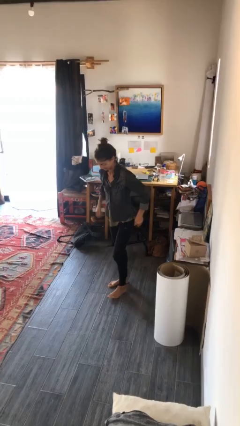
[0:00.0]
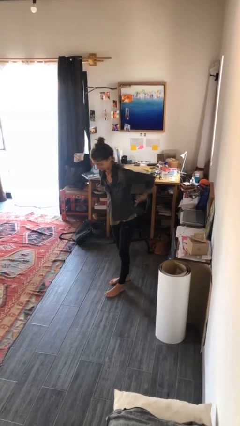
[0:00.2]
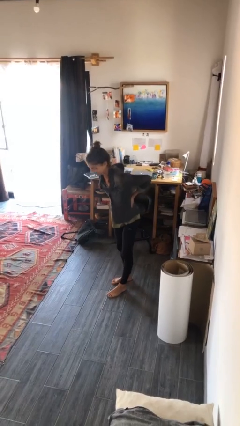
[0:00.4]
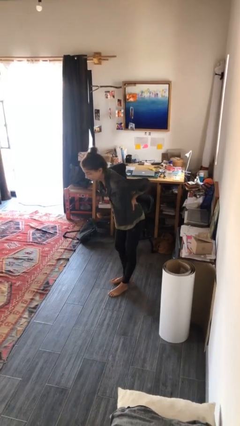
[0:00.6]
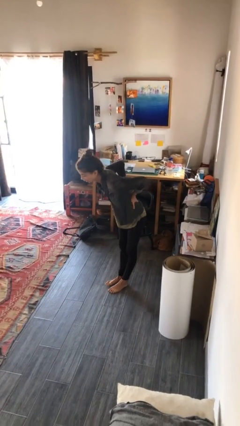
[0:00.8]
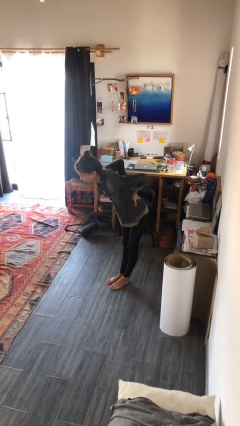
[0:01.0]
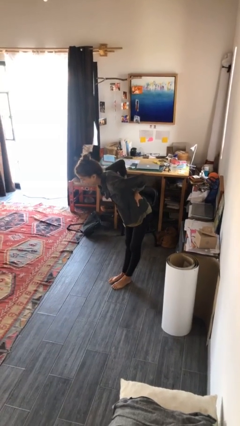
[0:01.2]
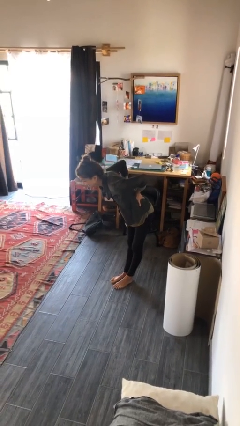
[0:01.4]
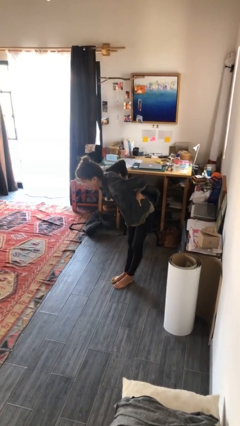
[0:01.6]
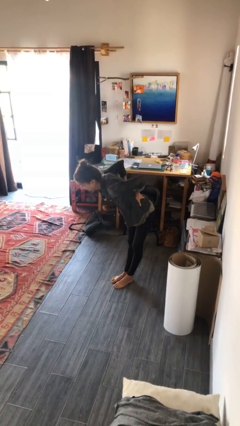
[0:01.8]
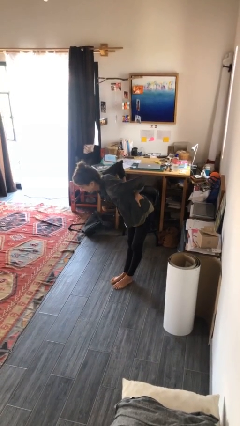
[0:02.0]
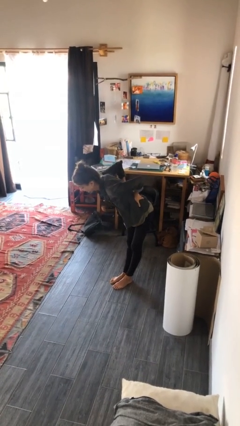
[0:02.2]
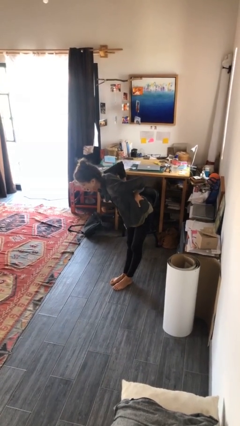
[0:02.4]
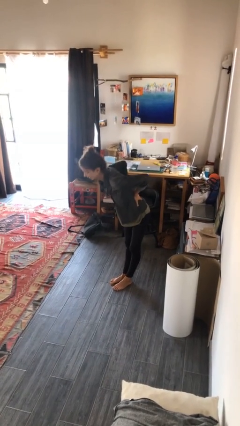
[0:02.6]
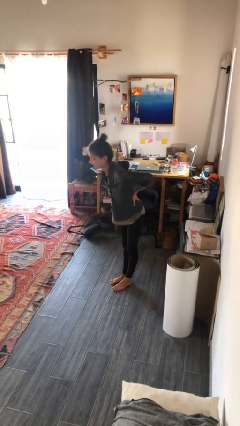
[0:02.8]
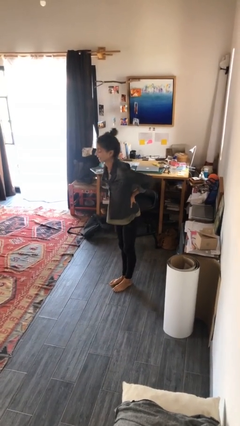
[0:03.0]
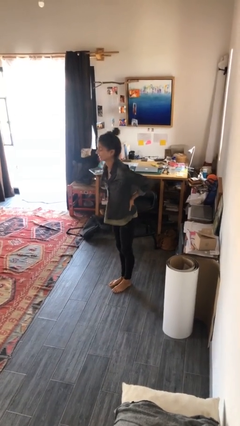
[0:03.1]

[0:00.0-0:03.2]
person stretches back

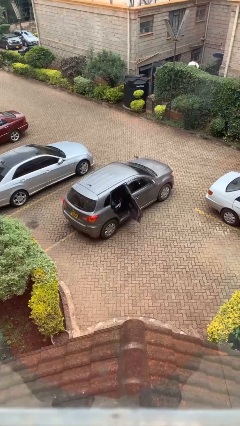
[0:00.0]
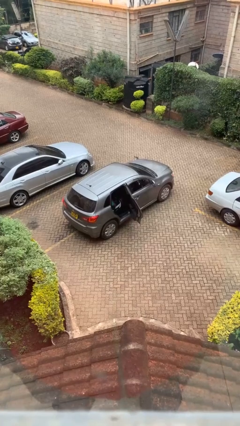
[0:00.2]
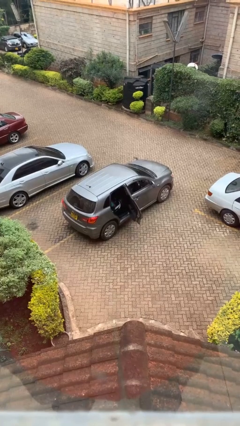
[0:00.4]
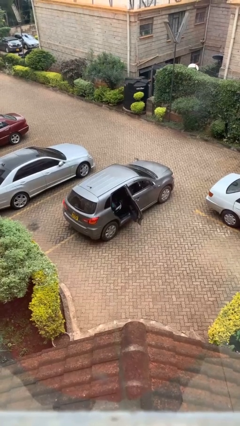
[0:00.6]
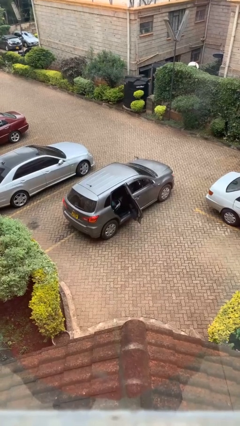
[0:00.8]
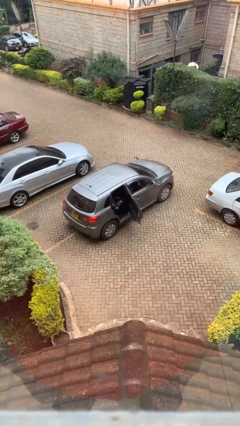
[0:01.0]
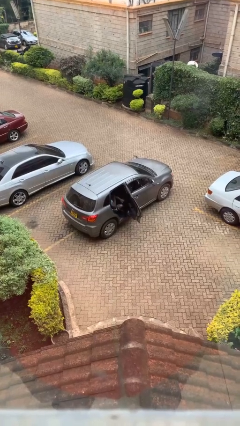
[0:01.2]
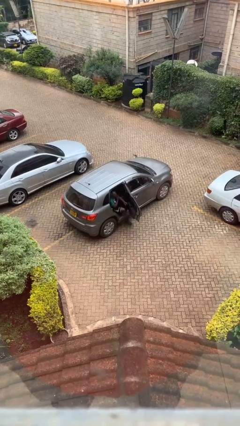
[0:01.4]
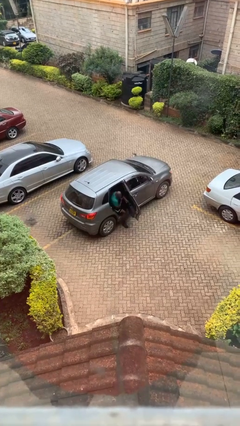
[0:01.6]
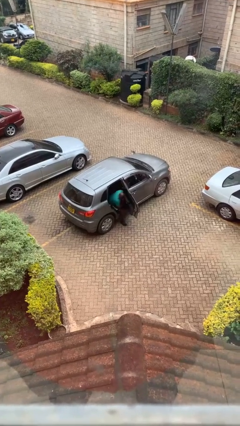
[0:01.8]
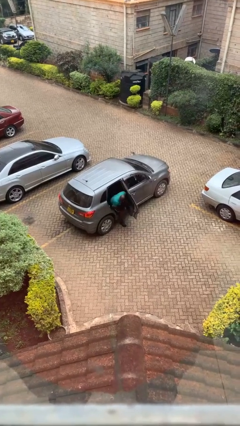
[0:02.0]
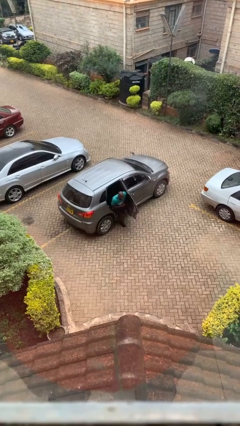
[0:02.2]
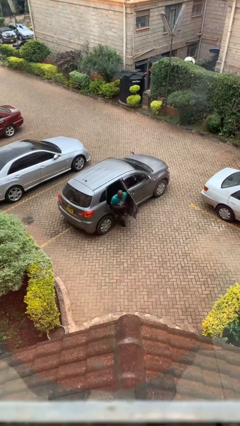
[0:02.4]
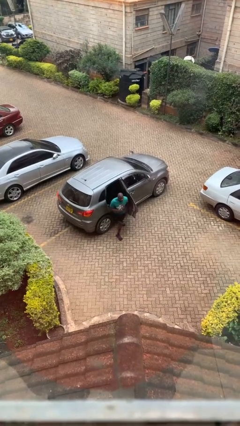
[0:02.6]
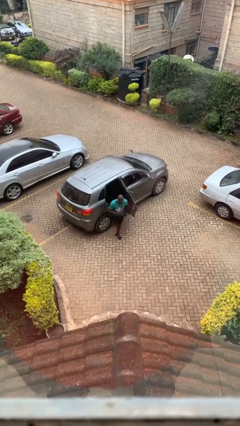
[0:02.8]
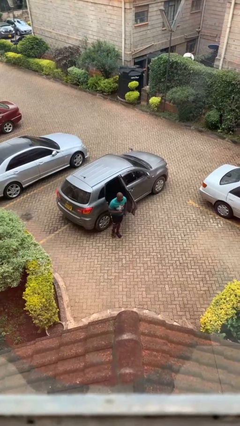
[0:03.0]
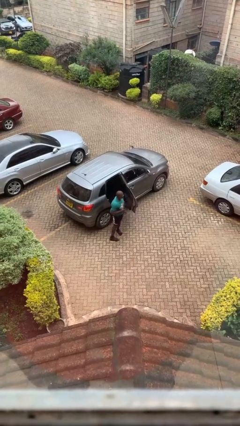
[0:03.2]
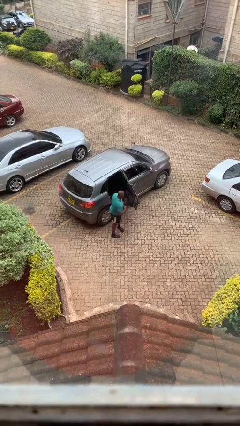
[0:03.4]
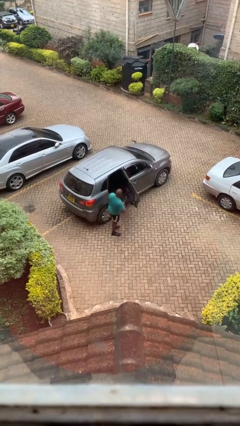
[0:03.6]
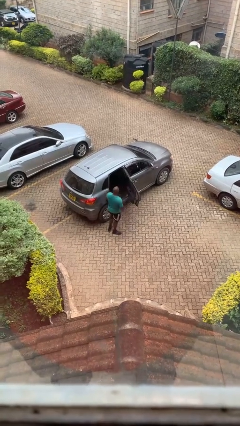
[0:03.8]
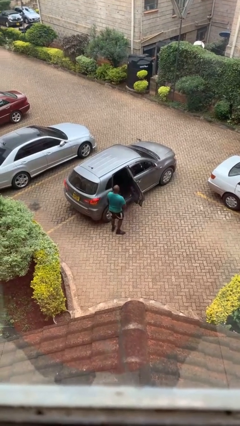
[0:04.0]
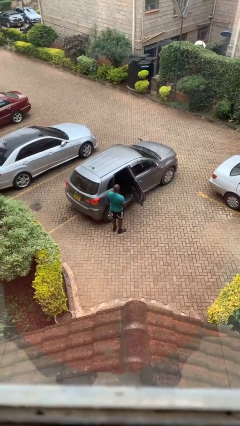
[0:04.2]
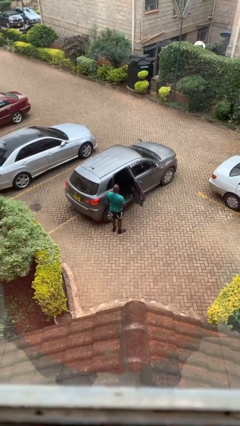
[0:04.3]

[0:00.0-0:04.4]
person exits car

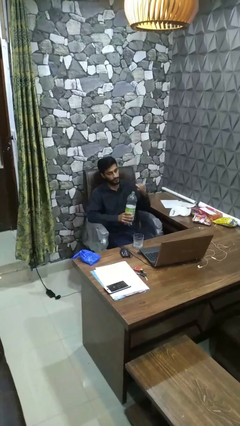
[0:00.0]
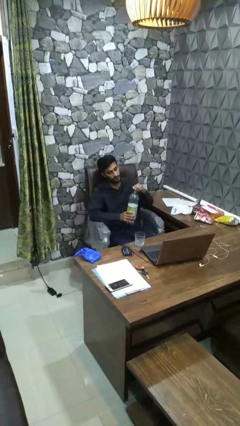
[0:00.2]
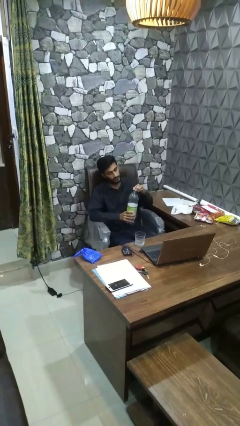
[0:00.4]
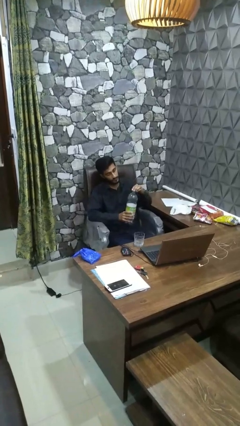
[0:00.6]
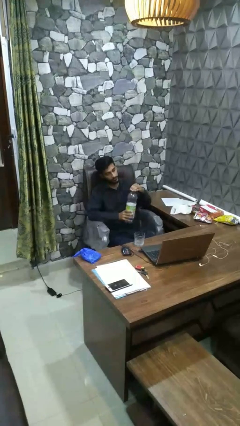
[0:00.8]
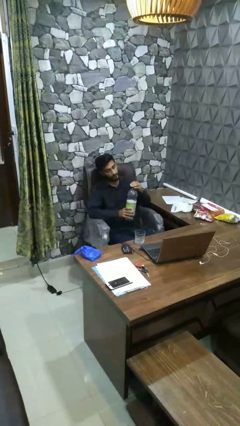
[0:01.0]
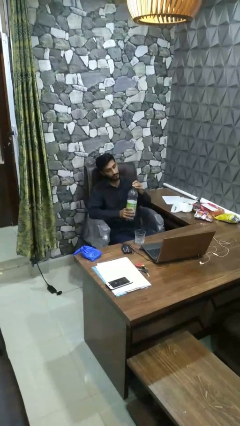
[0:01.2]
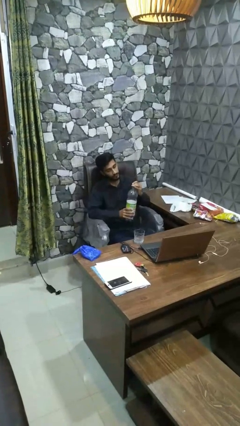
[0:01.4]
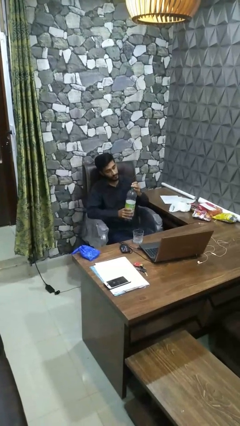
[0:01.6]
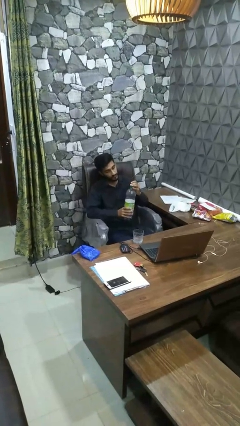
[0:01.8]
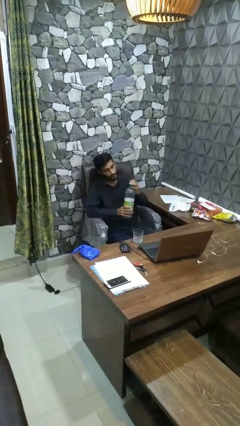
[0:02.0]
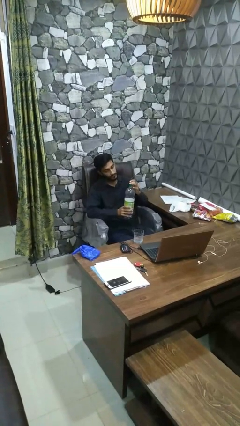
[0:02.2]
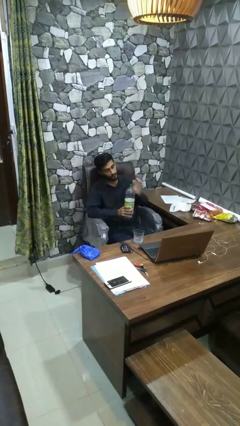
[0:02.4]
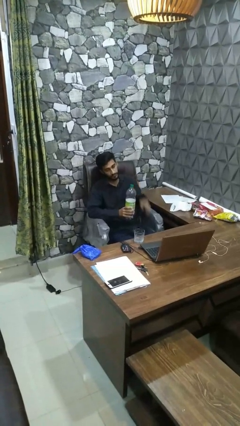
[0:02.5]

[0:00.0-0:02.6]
person screws lid to bottle

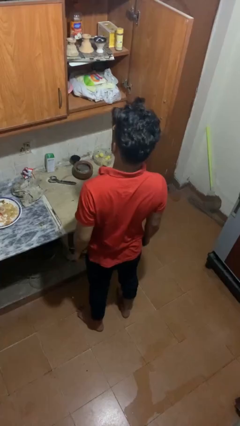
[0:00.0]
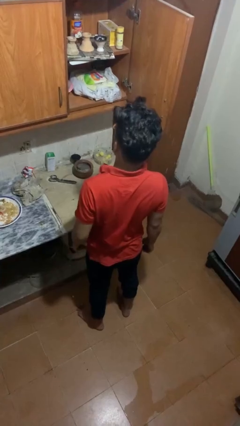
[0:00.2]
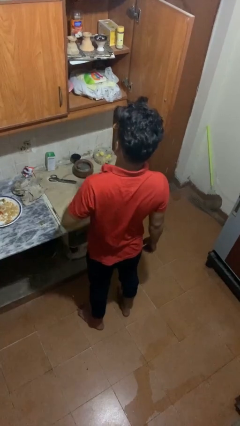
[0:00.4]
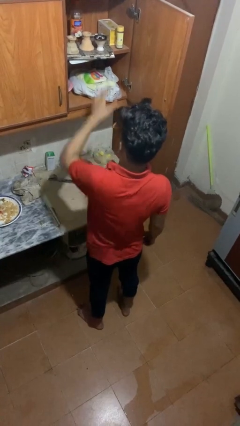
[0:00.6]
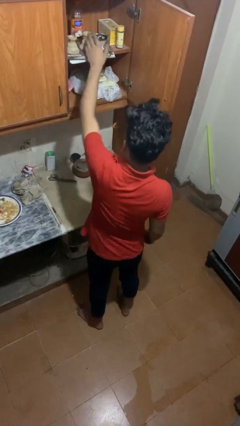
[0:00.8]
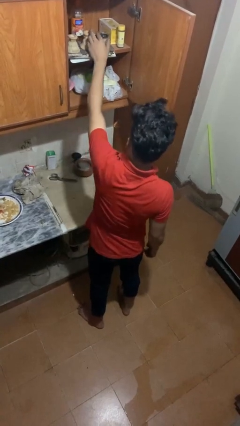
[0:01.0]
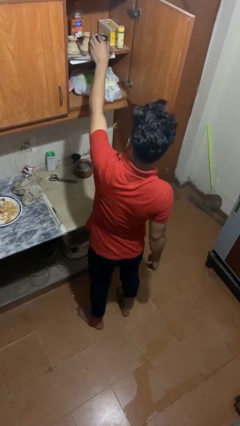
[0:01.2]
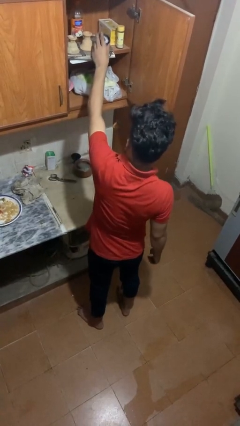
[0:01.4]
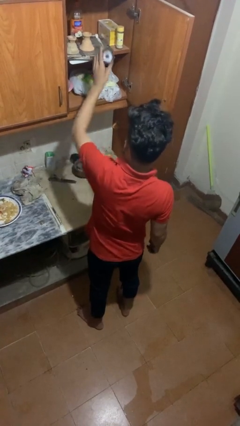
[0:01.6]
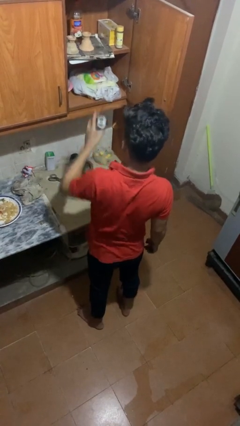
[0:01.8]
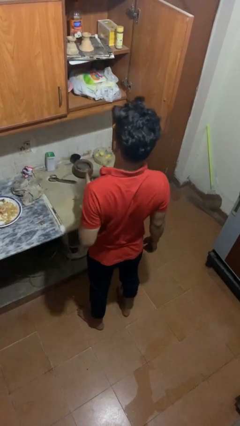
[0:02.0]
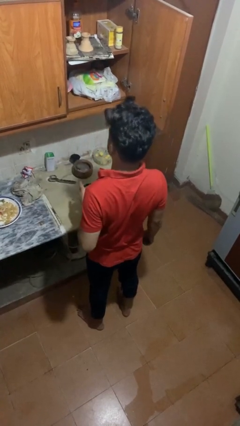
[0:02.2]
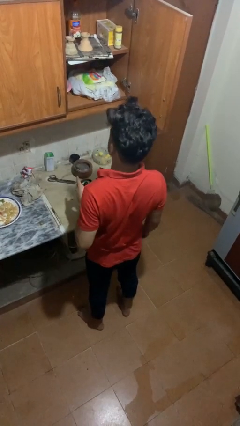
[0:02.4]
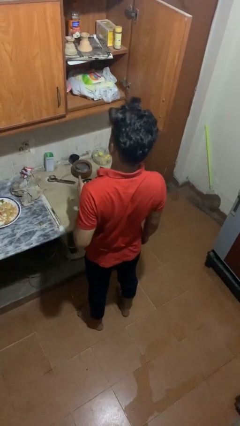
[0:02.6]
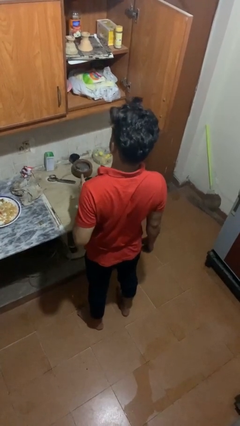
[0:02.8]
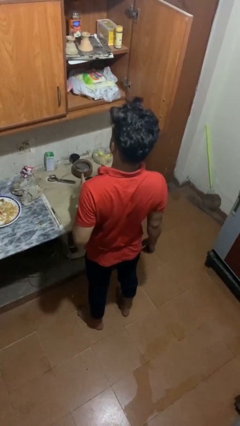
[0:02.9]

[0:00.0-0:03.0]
person takes object from cabinet

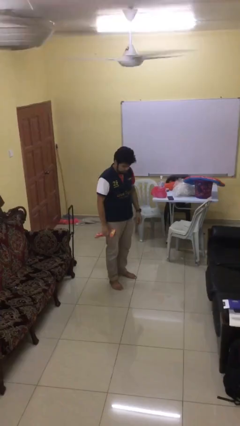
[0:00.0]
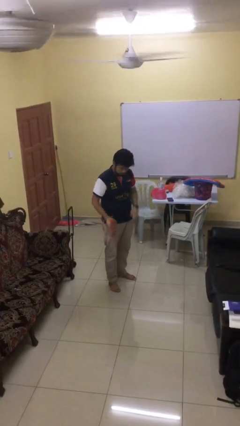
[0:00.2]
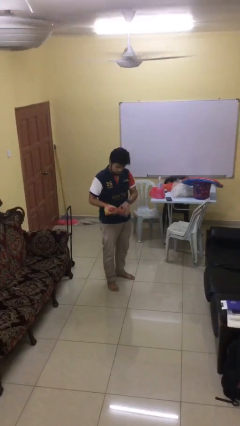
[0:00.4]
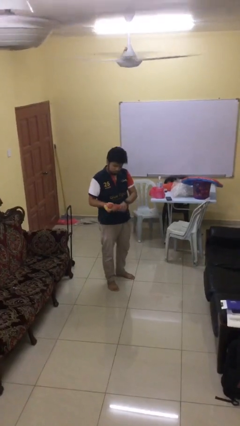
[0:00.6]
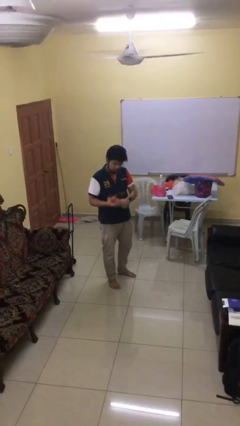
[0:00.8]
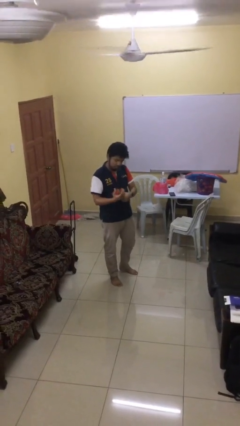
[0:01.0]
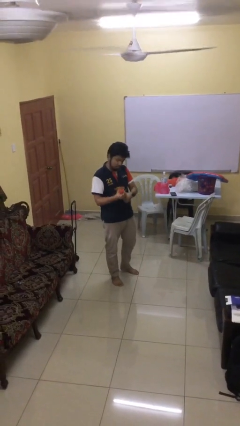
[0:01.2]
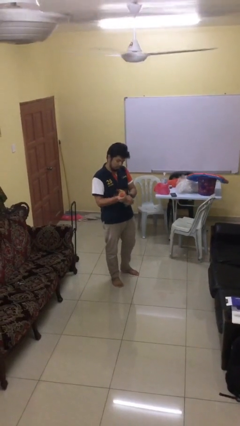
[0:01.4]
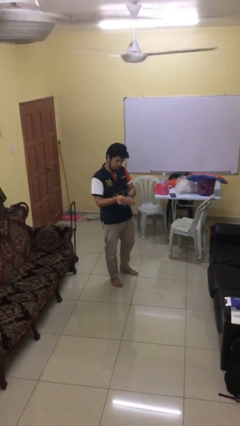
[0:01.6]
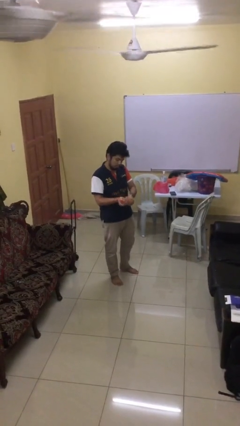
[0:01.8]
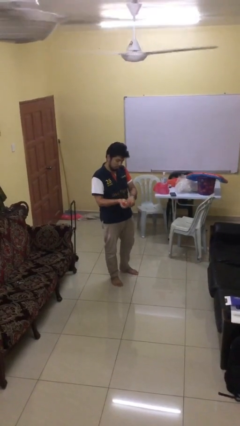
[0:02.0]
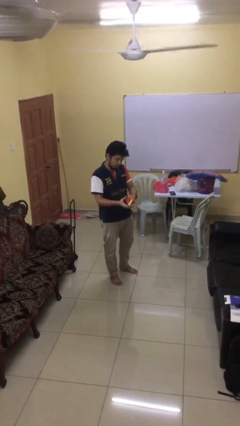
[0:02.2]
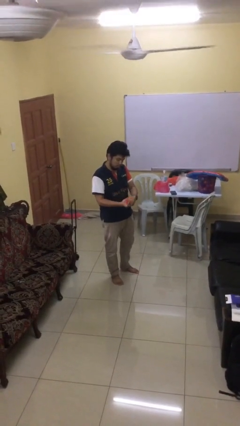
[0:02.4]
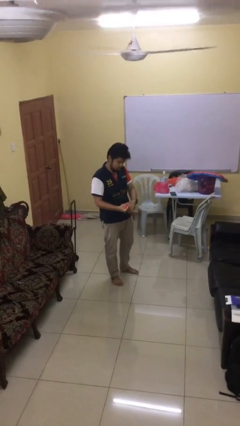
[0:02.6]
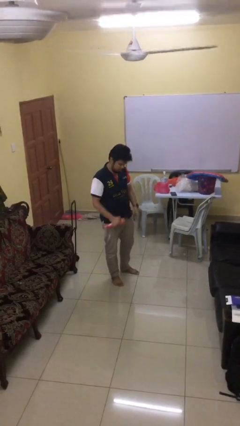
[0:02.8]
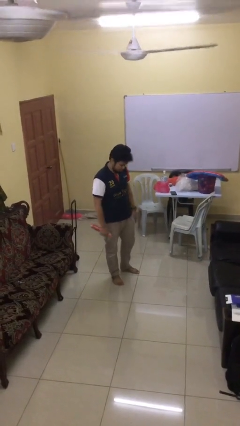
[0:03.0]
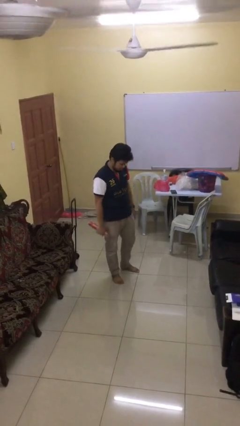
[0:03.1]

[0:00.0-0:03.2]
person squeezes object

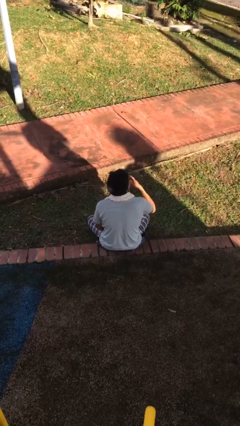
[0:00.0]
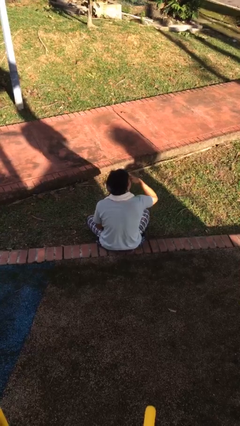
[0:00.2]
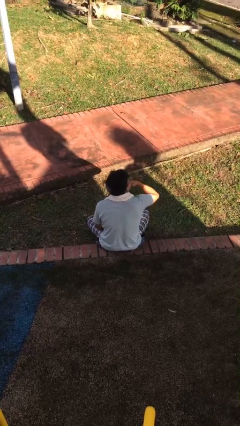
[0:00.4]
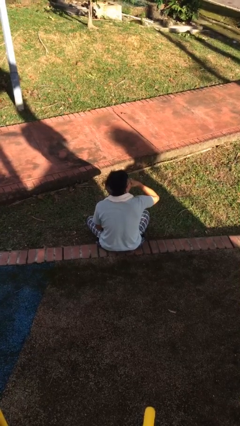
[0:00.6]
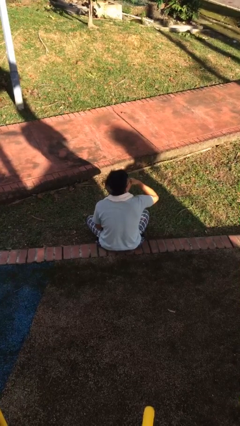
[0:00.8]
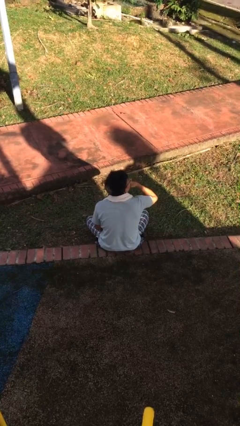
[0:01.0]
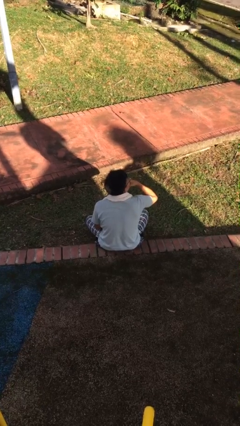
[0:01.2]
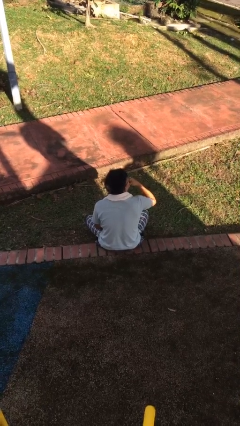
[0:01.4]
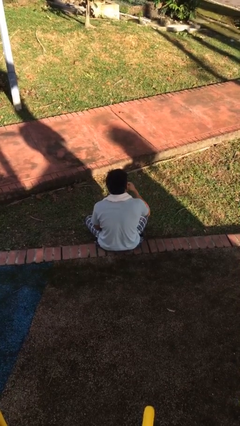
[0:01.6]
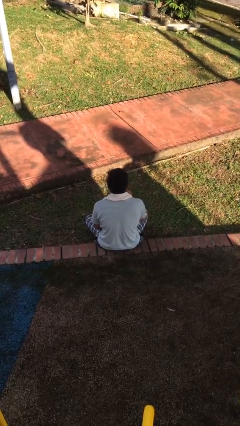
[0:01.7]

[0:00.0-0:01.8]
person strokes chin
